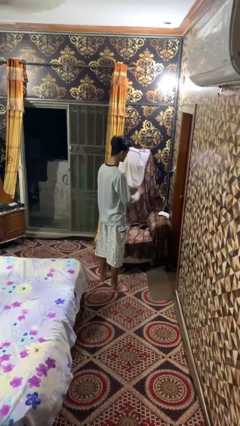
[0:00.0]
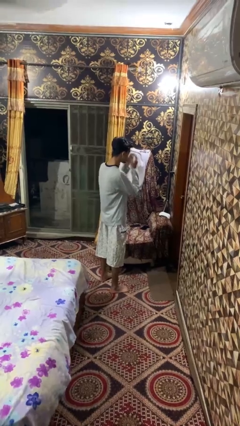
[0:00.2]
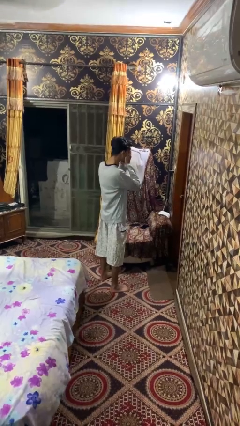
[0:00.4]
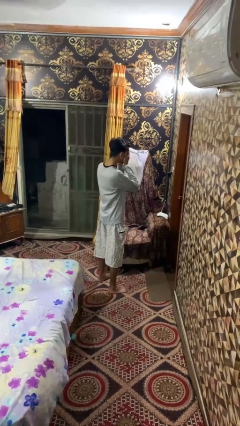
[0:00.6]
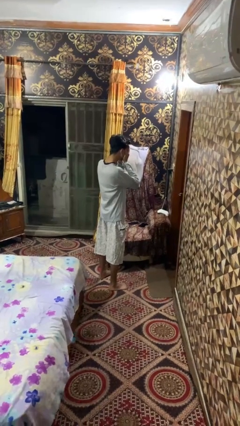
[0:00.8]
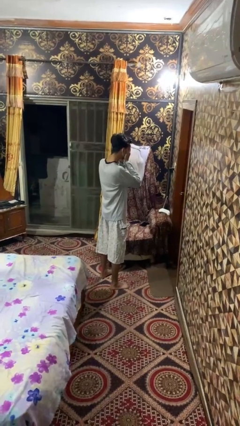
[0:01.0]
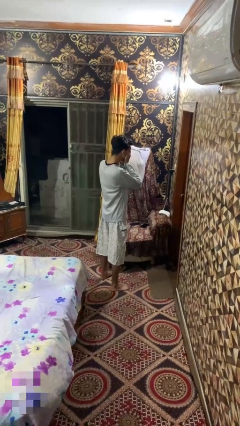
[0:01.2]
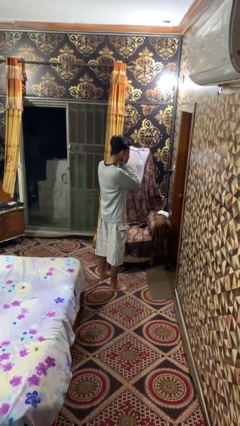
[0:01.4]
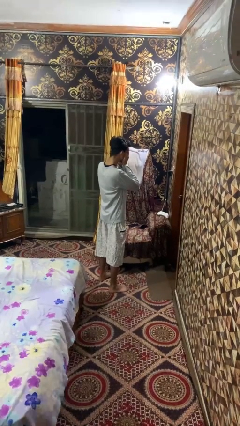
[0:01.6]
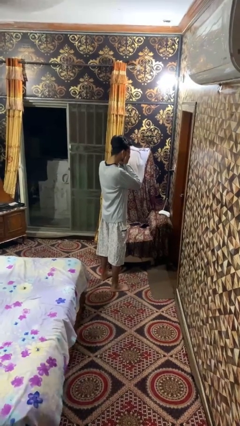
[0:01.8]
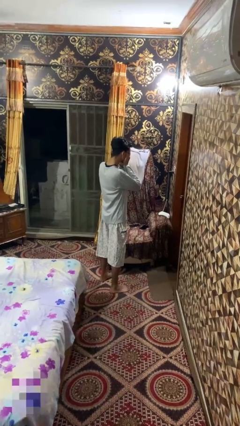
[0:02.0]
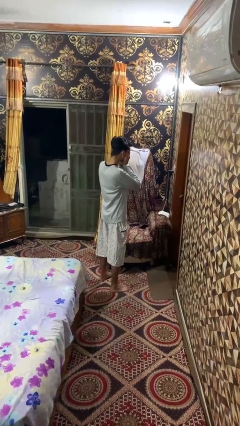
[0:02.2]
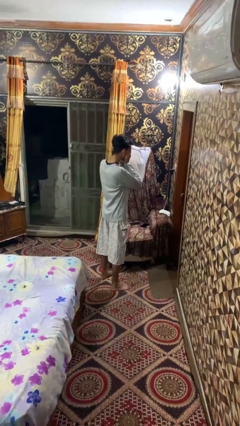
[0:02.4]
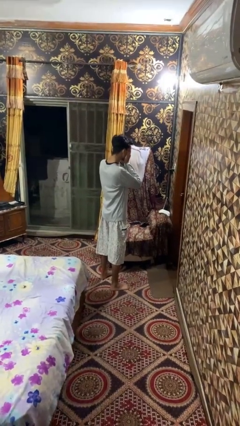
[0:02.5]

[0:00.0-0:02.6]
person covers face with hands

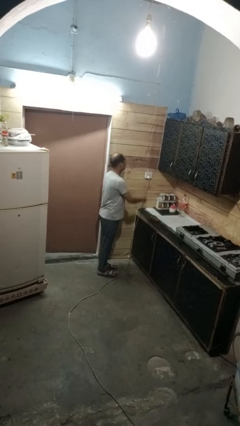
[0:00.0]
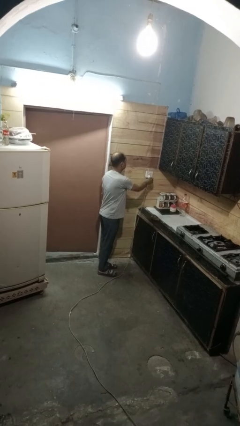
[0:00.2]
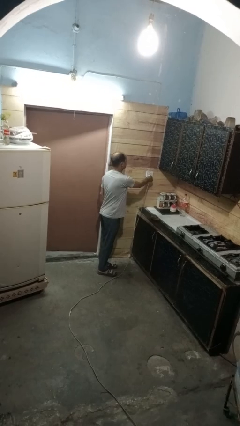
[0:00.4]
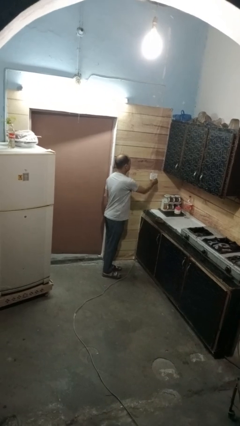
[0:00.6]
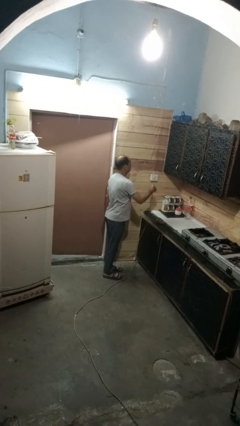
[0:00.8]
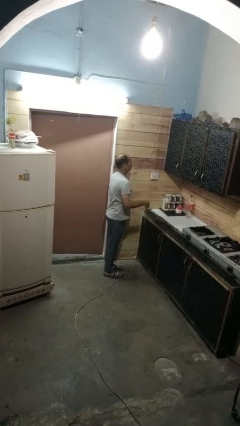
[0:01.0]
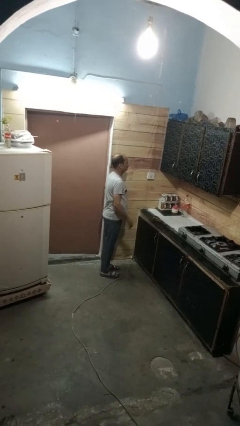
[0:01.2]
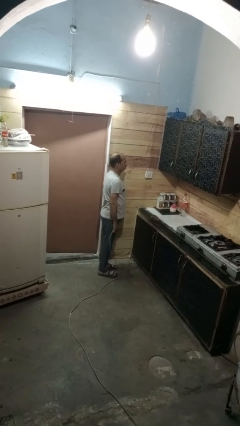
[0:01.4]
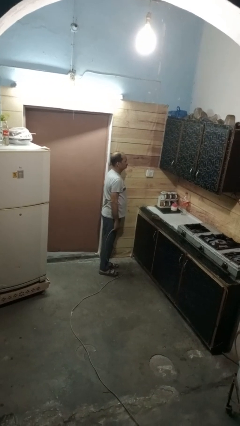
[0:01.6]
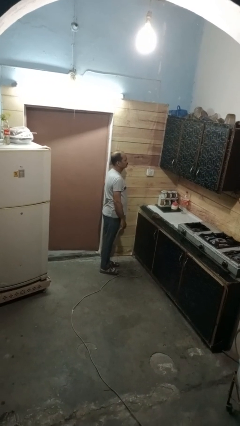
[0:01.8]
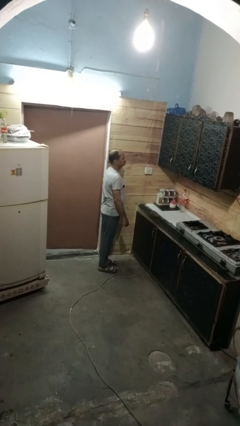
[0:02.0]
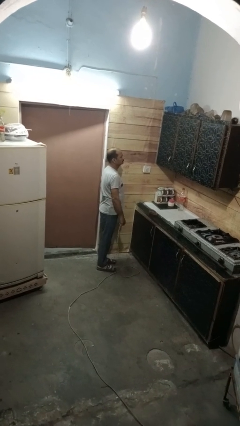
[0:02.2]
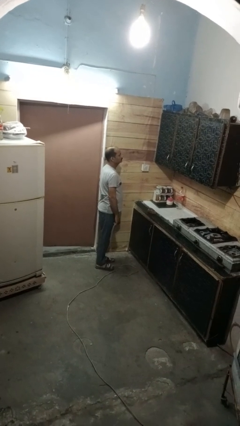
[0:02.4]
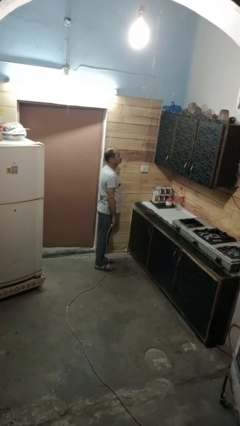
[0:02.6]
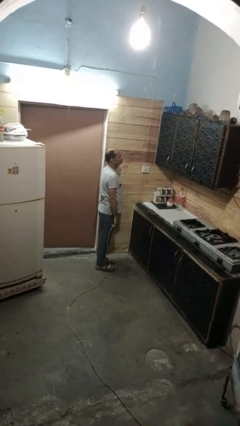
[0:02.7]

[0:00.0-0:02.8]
person unplugs from electrical socket

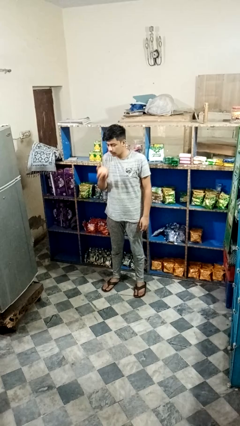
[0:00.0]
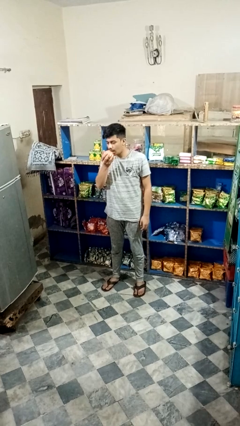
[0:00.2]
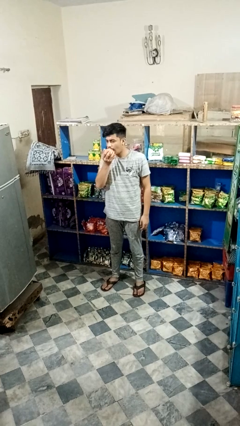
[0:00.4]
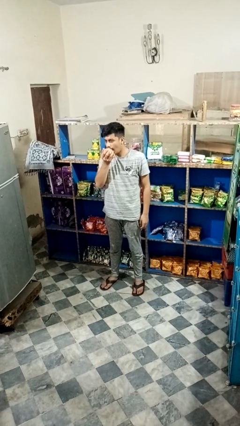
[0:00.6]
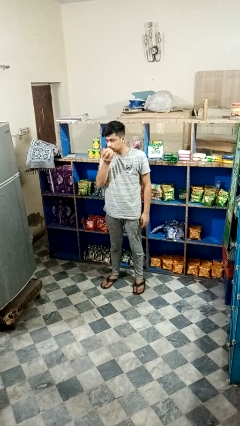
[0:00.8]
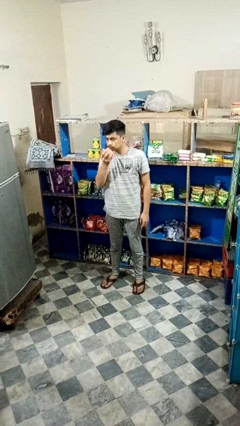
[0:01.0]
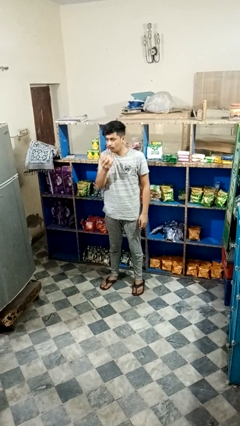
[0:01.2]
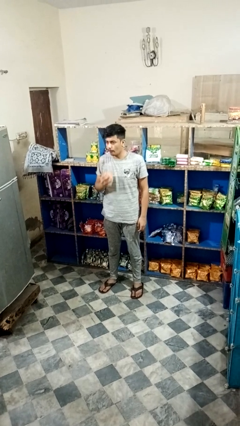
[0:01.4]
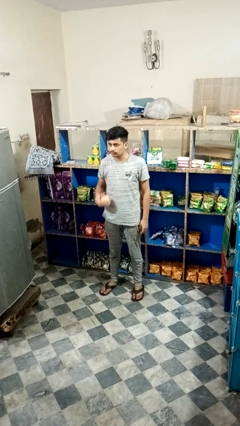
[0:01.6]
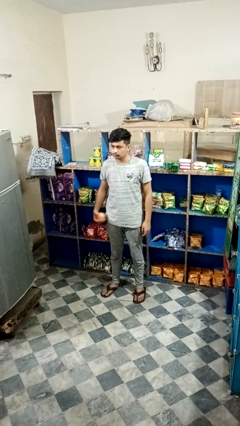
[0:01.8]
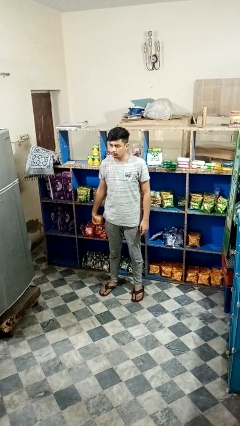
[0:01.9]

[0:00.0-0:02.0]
person eats apple

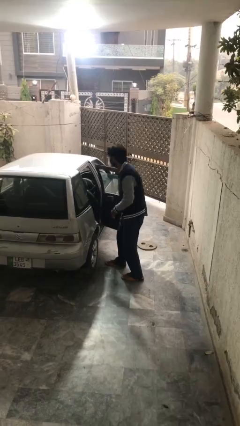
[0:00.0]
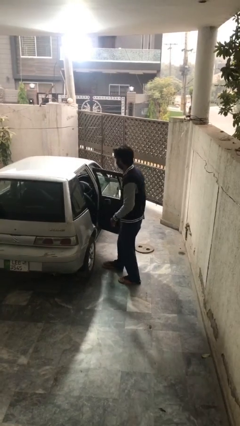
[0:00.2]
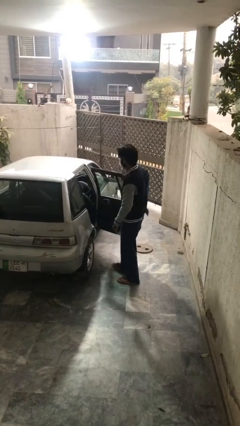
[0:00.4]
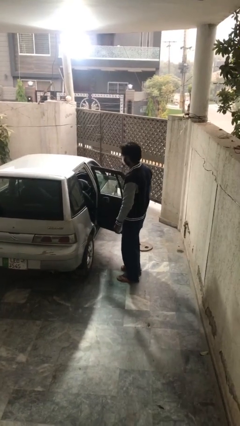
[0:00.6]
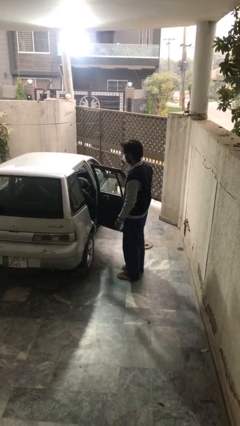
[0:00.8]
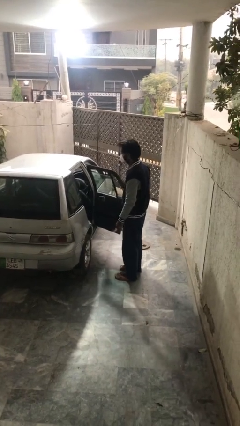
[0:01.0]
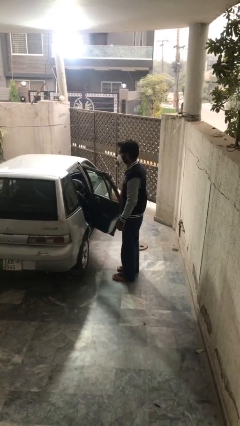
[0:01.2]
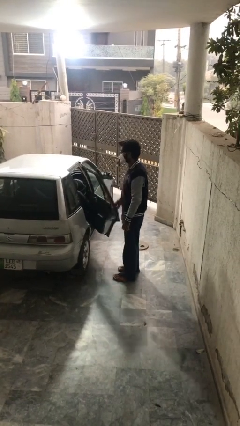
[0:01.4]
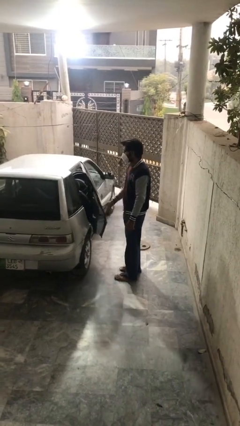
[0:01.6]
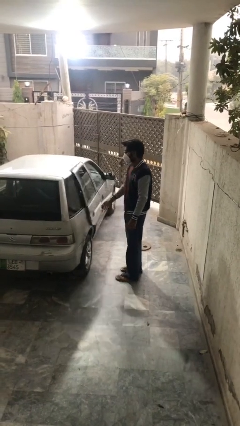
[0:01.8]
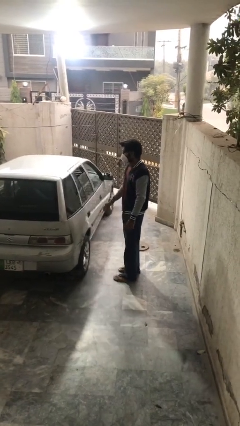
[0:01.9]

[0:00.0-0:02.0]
person closes car door

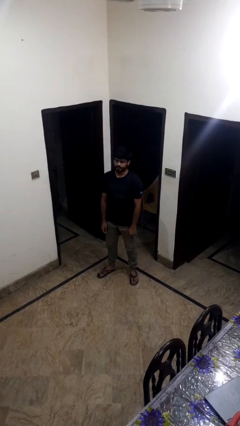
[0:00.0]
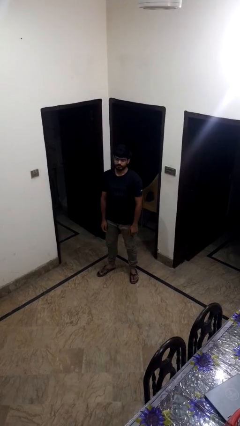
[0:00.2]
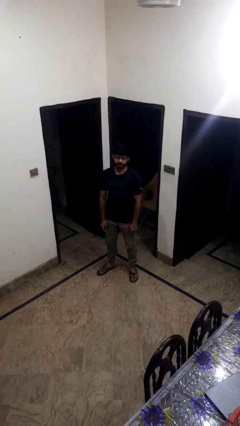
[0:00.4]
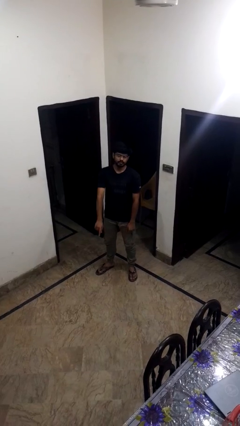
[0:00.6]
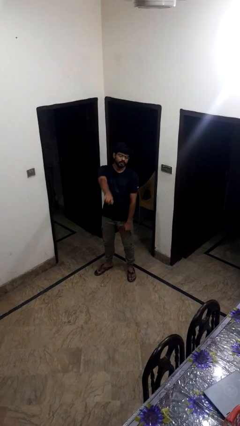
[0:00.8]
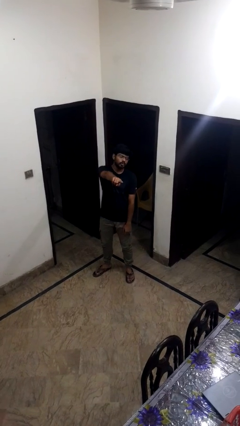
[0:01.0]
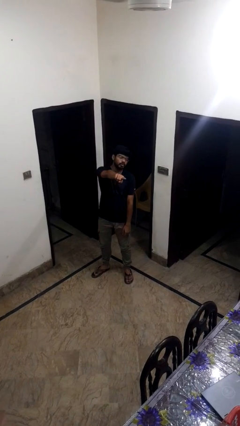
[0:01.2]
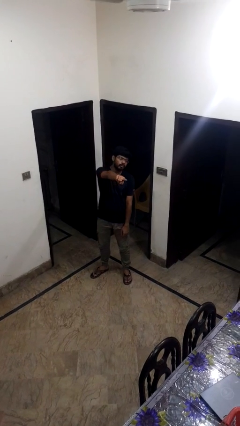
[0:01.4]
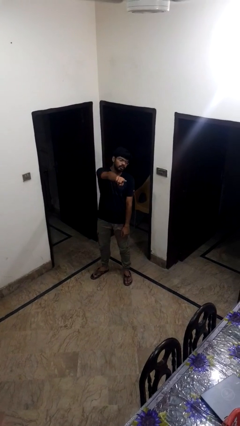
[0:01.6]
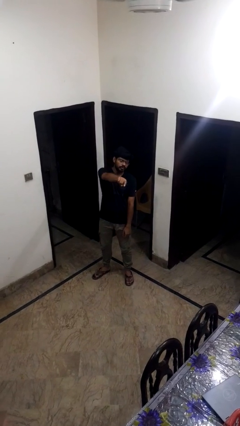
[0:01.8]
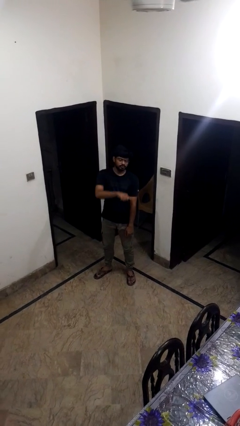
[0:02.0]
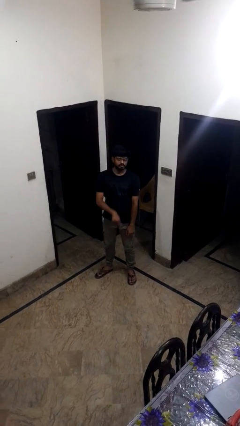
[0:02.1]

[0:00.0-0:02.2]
person points at person

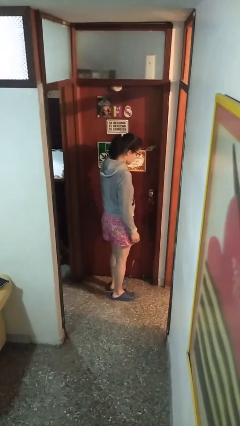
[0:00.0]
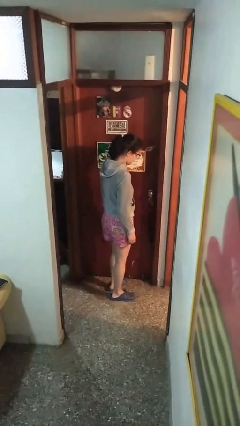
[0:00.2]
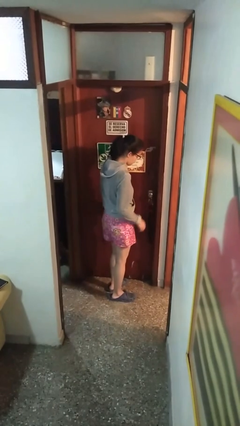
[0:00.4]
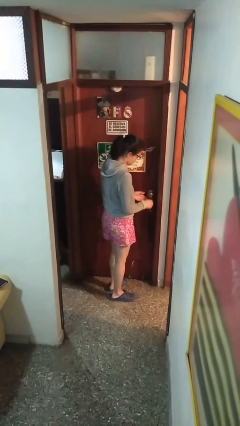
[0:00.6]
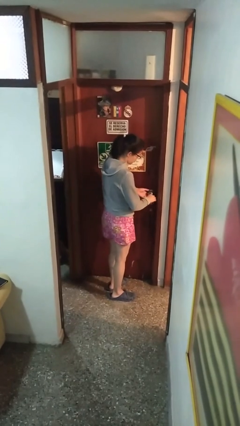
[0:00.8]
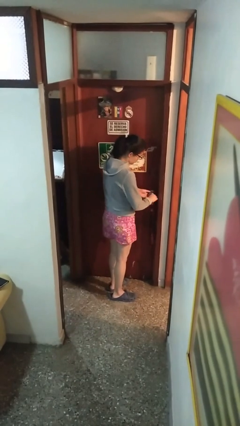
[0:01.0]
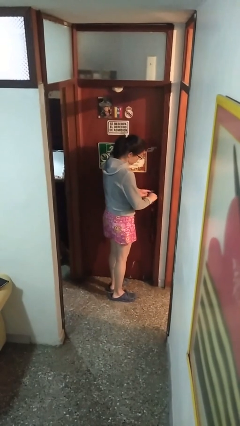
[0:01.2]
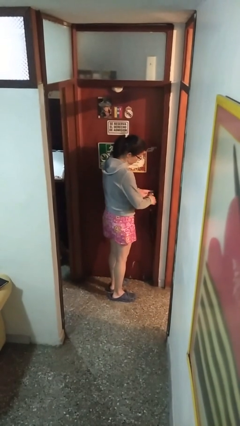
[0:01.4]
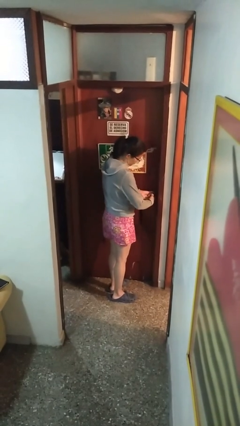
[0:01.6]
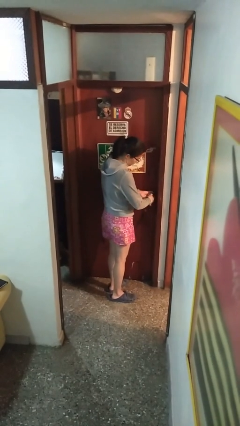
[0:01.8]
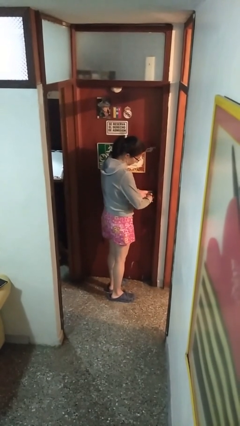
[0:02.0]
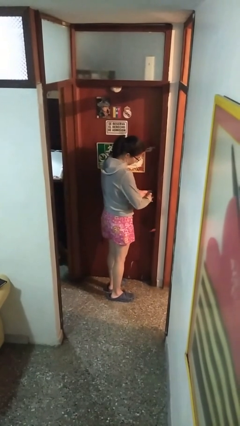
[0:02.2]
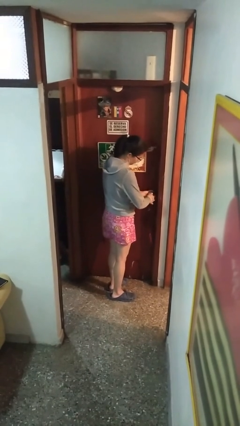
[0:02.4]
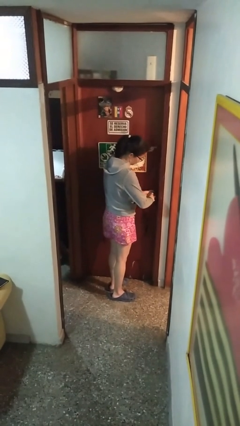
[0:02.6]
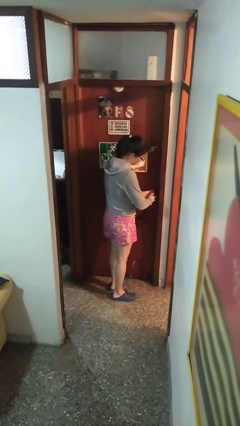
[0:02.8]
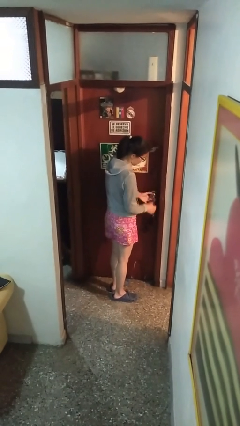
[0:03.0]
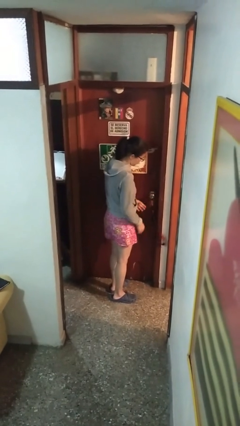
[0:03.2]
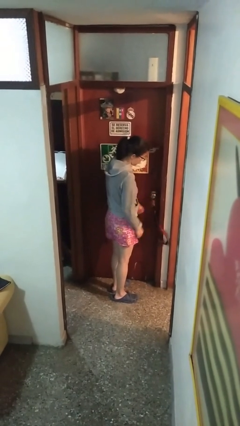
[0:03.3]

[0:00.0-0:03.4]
person unlocks door with keys

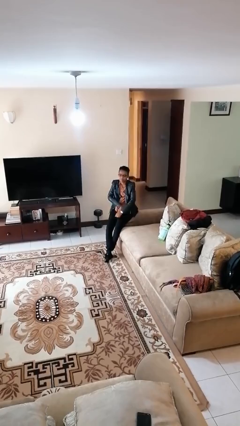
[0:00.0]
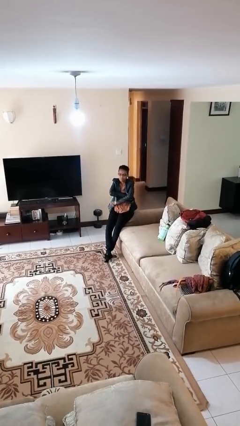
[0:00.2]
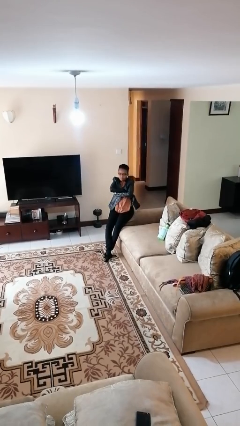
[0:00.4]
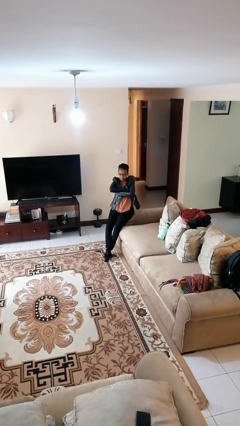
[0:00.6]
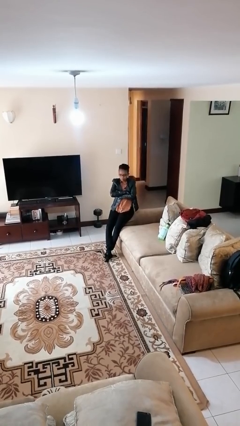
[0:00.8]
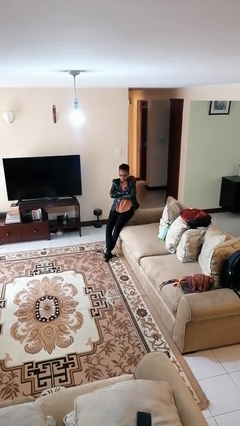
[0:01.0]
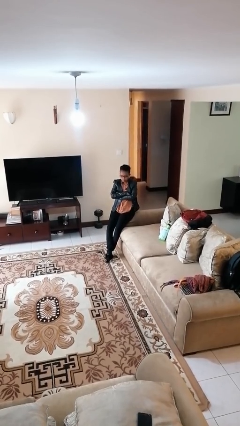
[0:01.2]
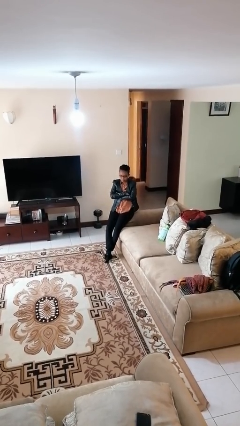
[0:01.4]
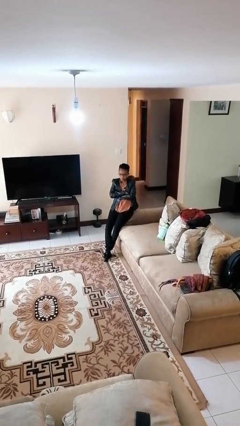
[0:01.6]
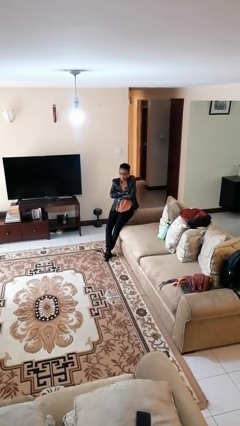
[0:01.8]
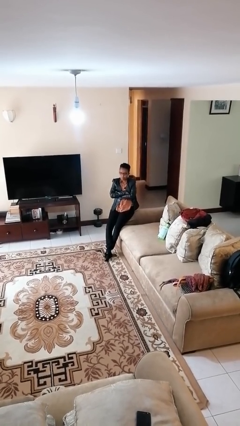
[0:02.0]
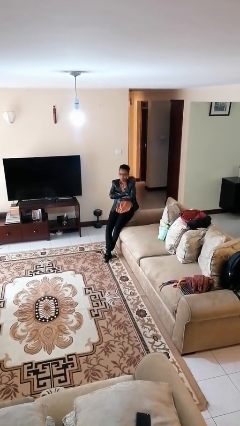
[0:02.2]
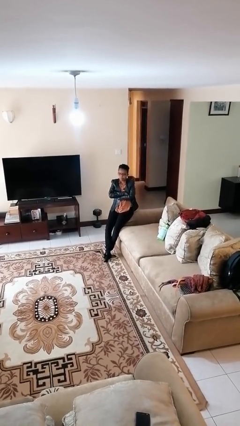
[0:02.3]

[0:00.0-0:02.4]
person crosses arms
